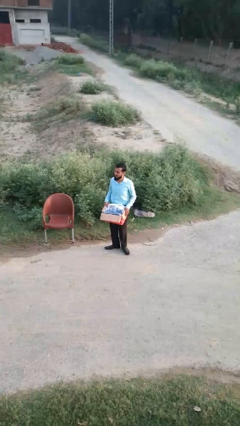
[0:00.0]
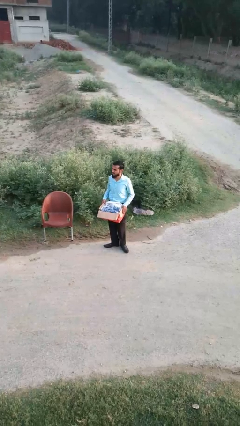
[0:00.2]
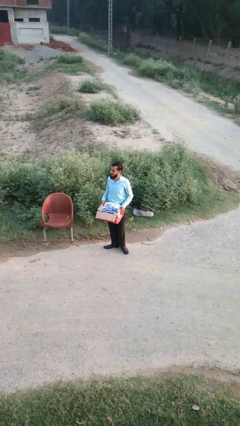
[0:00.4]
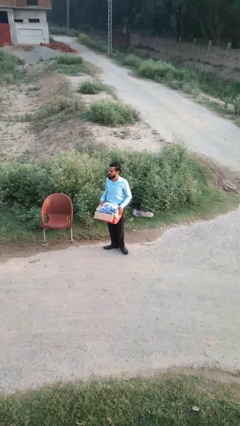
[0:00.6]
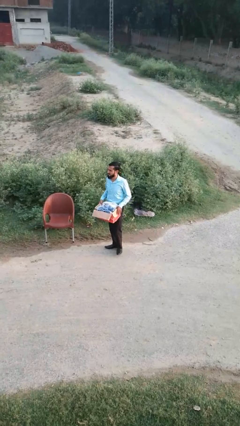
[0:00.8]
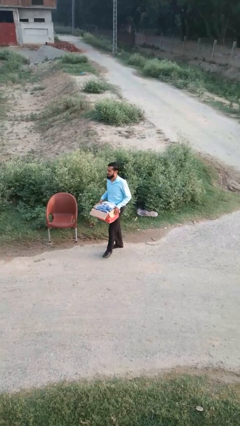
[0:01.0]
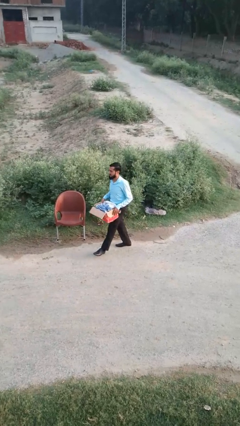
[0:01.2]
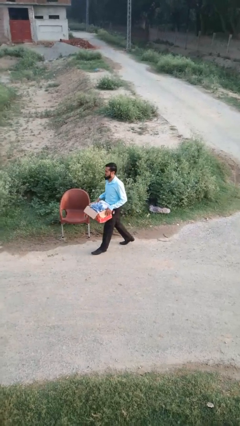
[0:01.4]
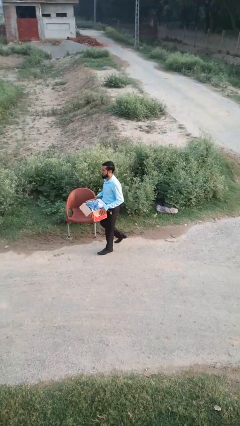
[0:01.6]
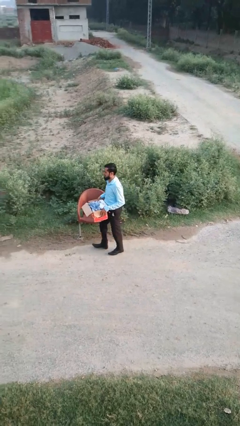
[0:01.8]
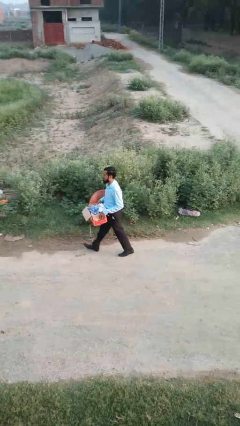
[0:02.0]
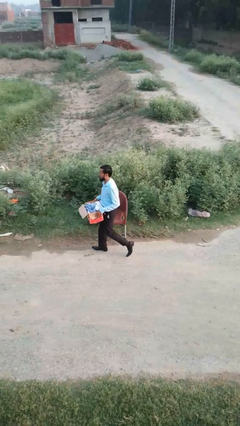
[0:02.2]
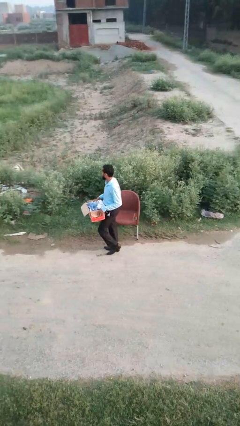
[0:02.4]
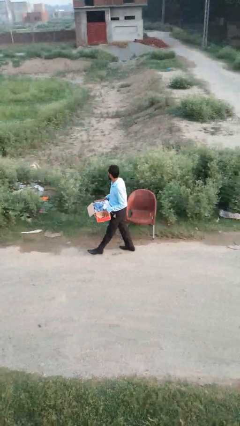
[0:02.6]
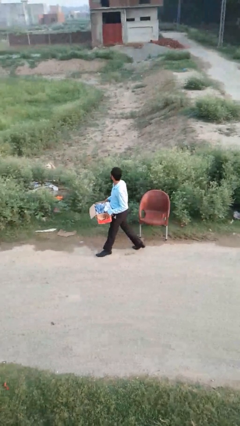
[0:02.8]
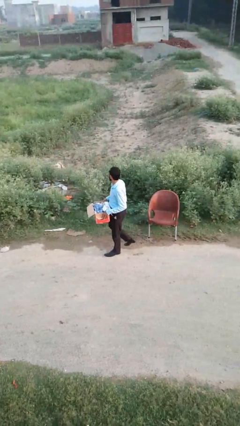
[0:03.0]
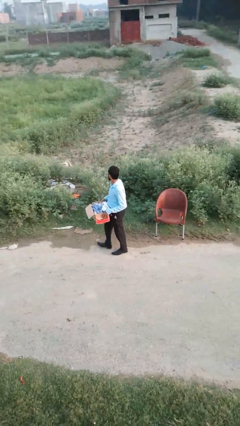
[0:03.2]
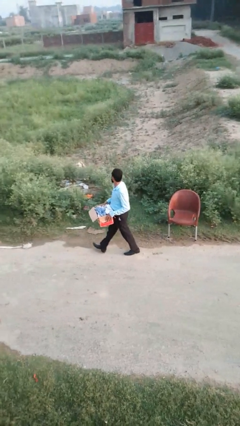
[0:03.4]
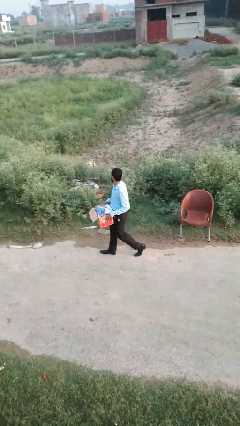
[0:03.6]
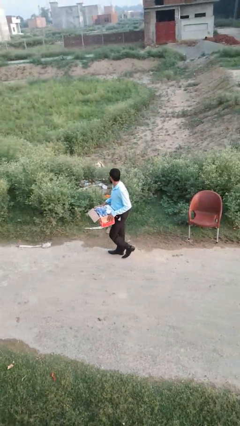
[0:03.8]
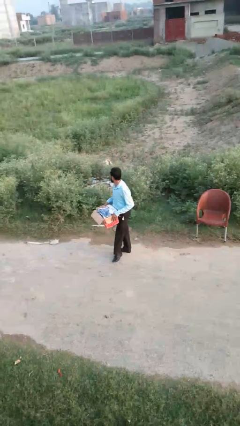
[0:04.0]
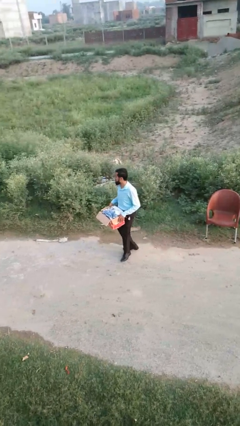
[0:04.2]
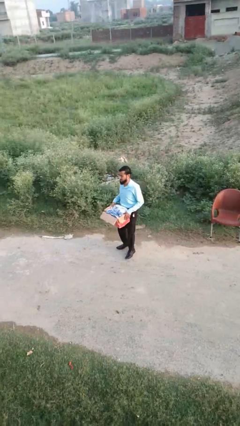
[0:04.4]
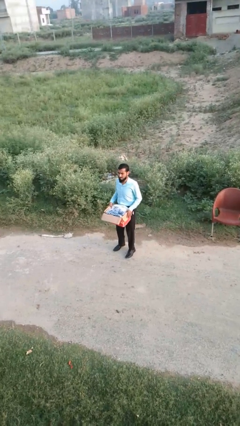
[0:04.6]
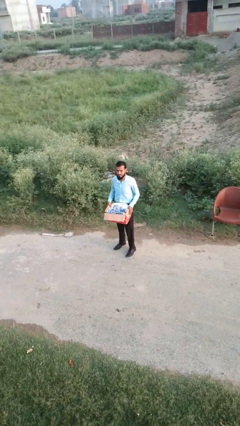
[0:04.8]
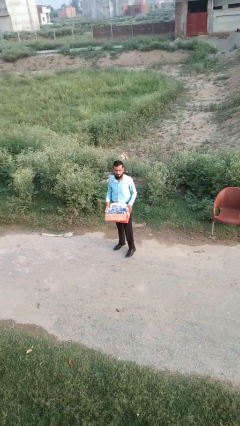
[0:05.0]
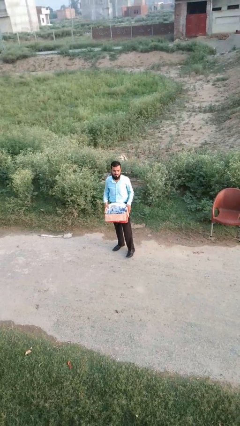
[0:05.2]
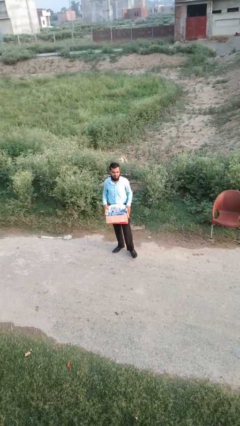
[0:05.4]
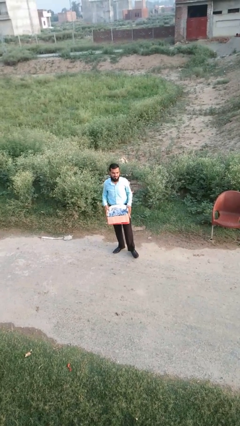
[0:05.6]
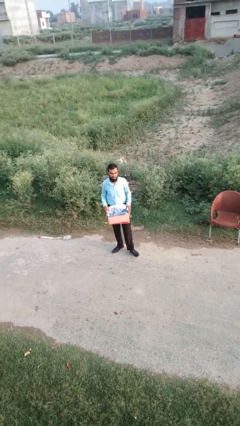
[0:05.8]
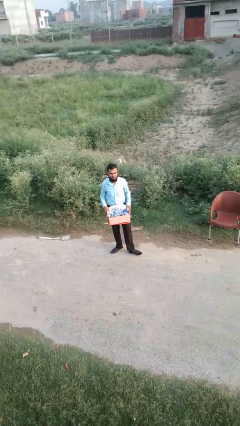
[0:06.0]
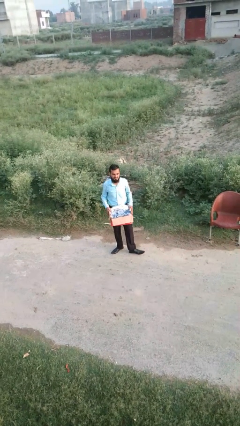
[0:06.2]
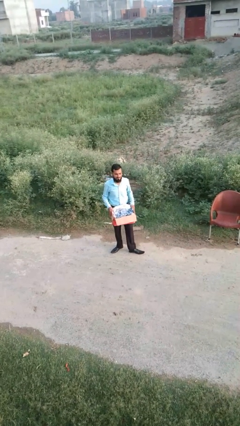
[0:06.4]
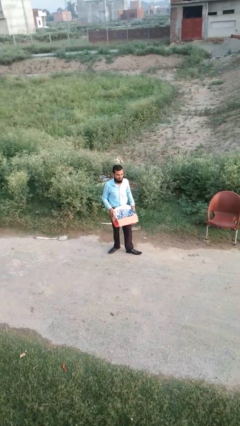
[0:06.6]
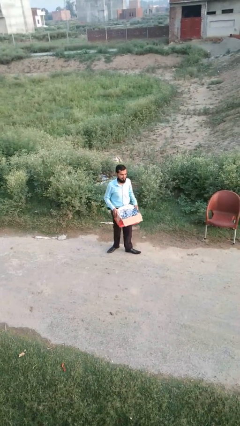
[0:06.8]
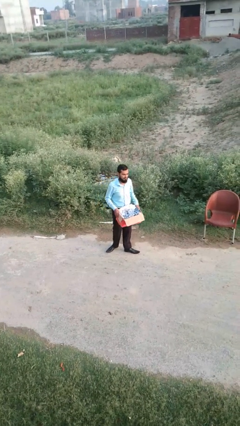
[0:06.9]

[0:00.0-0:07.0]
person carries laundry basket

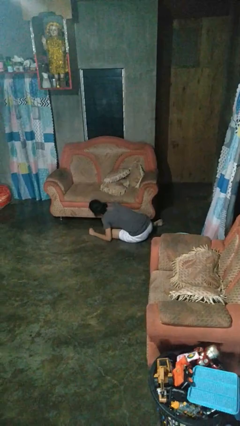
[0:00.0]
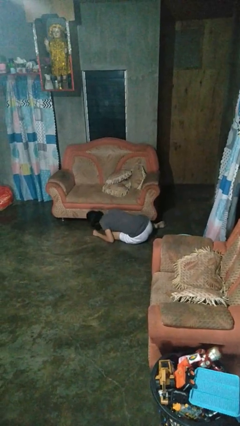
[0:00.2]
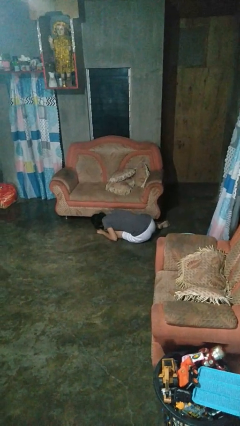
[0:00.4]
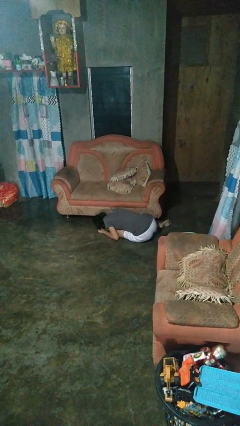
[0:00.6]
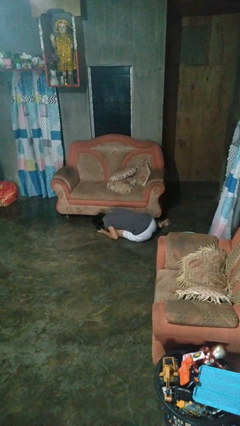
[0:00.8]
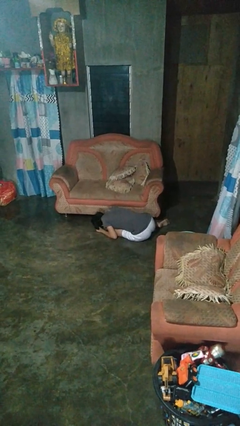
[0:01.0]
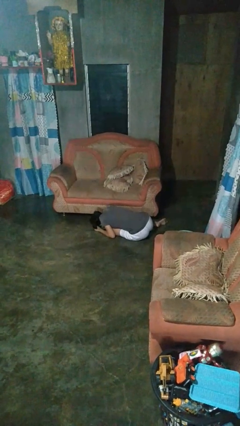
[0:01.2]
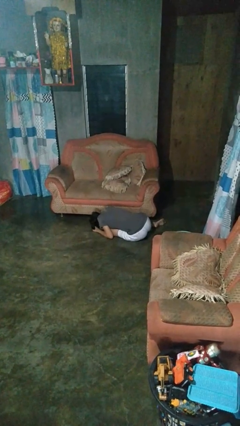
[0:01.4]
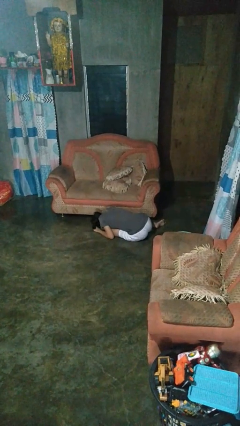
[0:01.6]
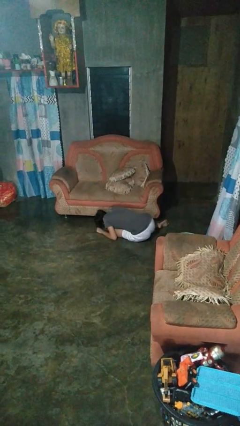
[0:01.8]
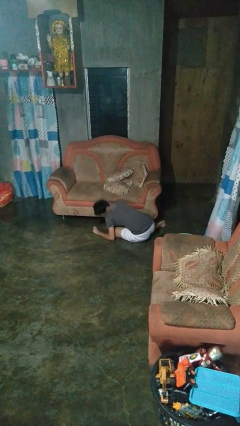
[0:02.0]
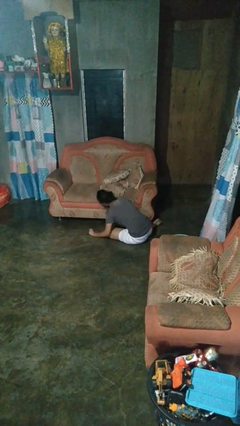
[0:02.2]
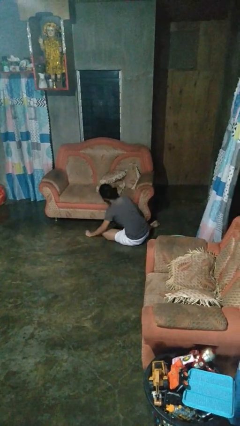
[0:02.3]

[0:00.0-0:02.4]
person searches under couch

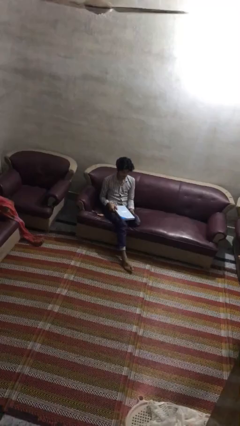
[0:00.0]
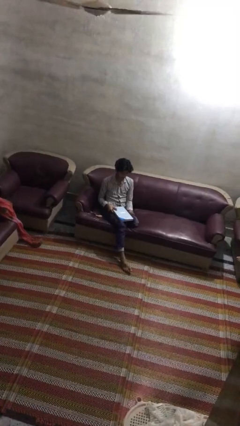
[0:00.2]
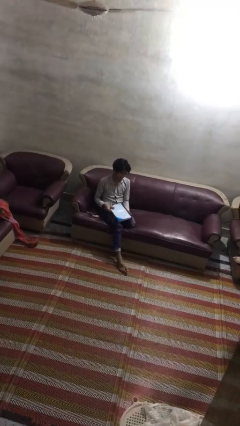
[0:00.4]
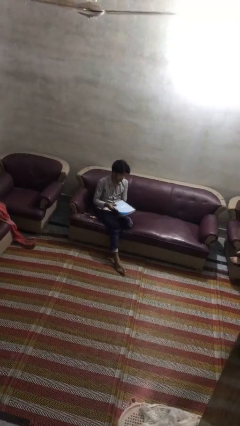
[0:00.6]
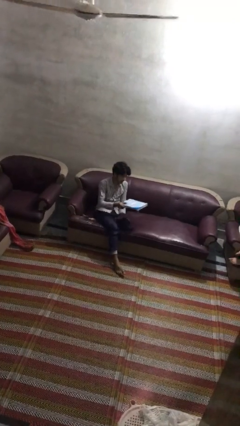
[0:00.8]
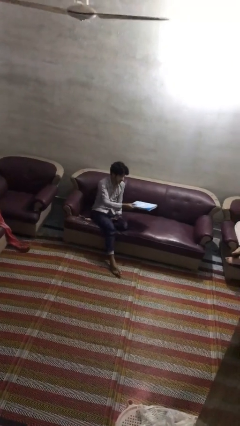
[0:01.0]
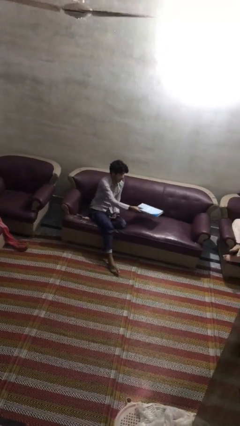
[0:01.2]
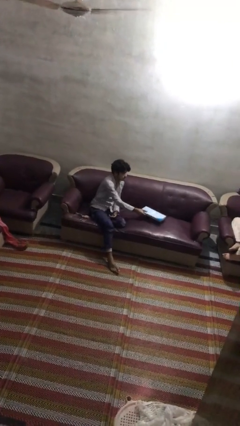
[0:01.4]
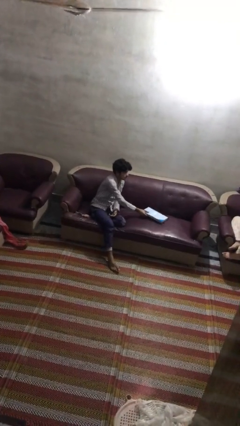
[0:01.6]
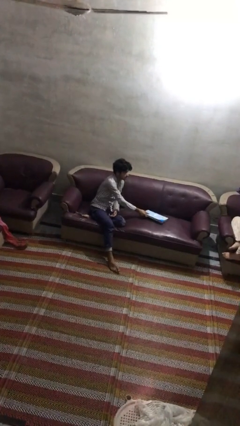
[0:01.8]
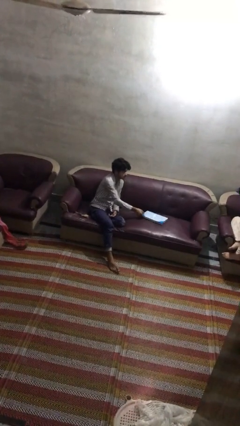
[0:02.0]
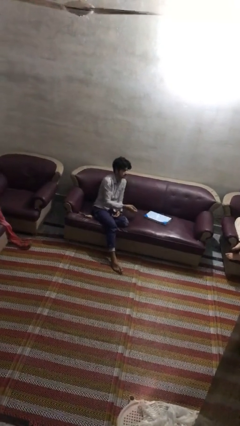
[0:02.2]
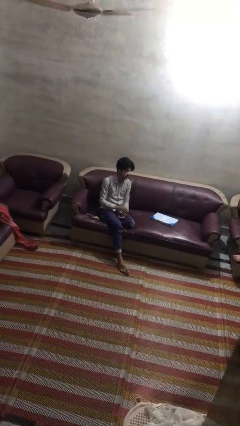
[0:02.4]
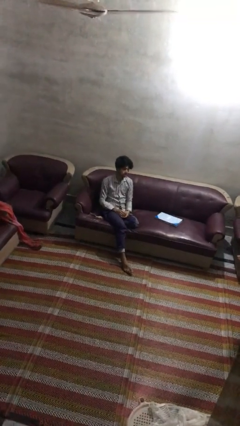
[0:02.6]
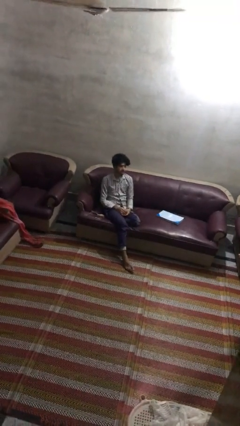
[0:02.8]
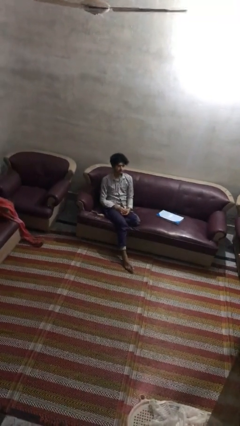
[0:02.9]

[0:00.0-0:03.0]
person puts down object on couch

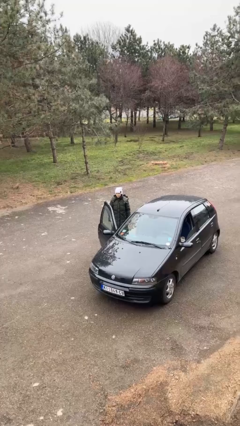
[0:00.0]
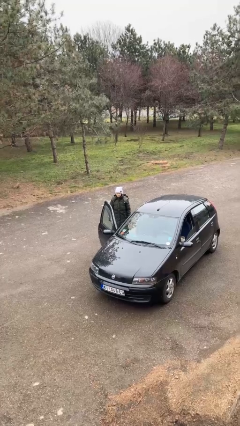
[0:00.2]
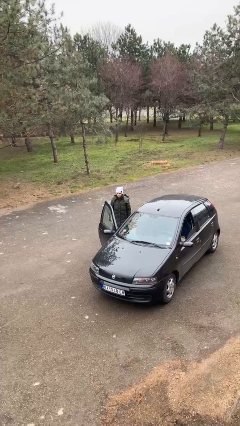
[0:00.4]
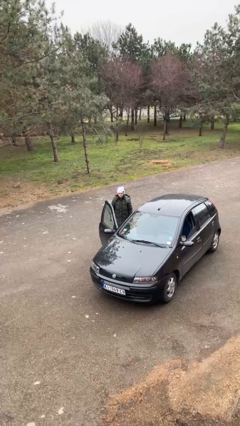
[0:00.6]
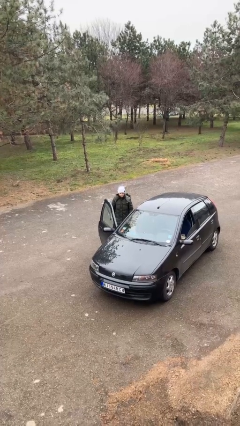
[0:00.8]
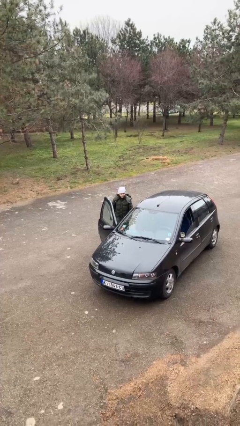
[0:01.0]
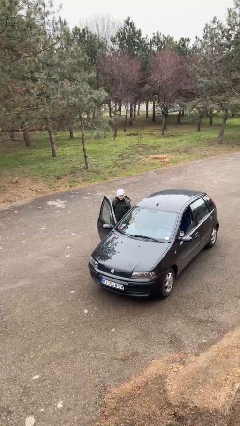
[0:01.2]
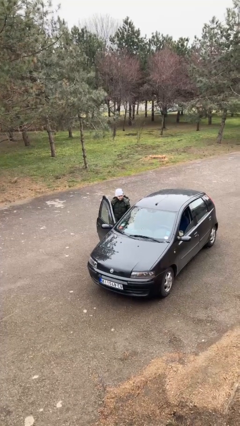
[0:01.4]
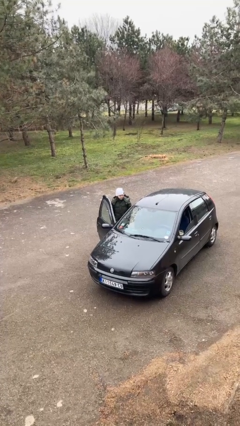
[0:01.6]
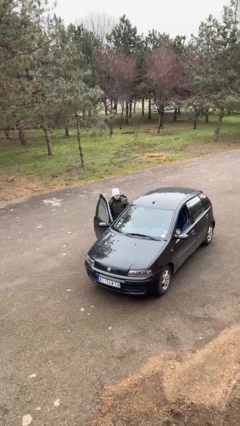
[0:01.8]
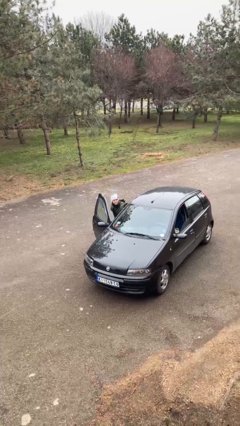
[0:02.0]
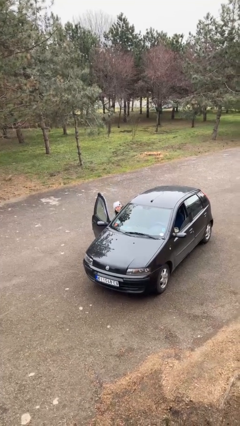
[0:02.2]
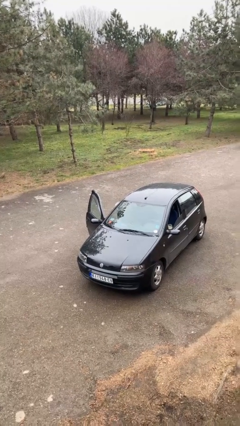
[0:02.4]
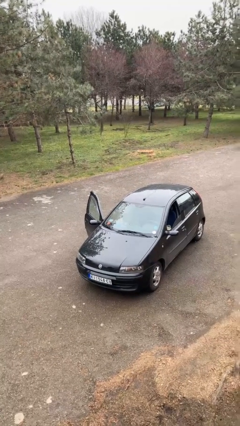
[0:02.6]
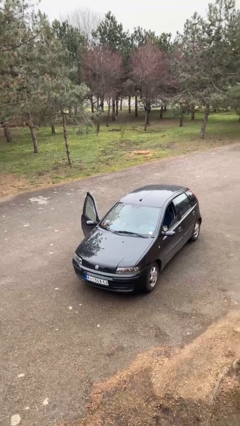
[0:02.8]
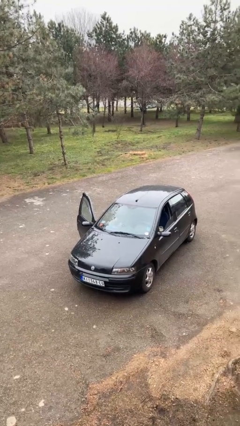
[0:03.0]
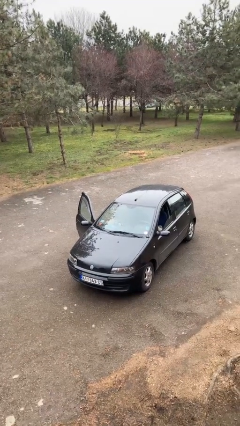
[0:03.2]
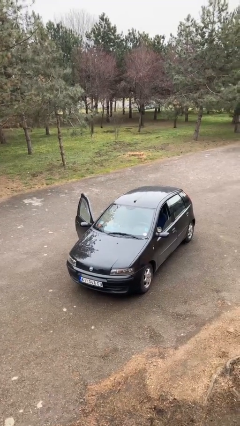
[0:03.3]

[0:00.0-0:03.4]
person enters car

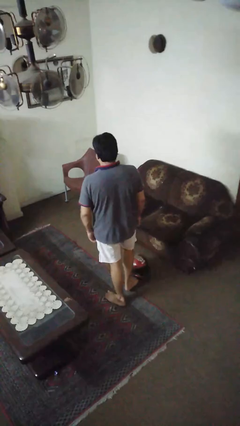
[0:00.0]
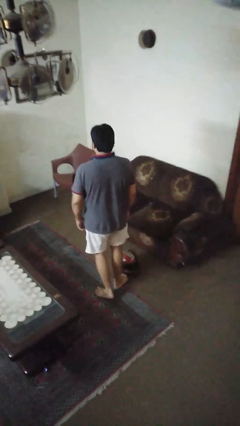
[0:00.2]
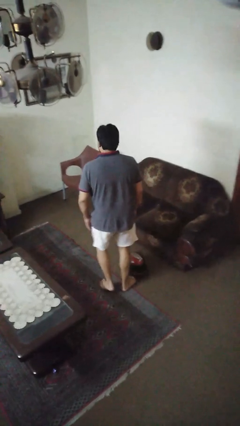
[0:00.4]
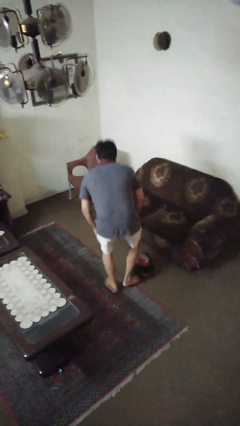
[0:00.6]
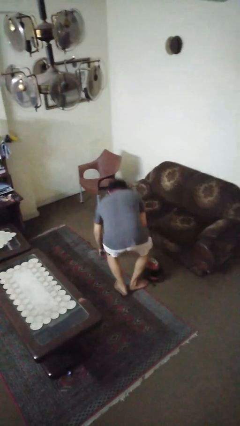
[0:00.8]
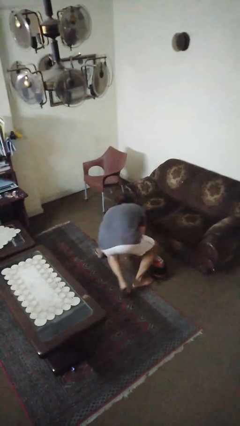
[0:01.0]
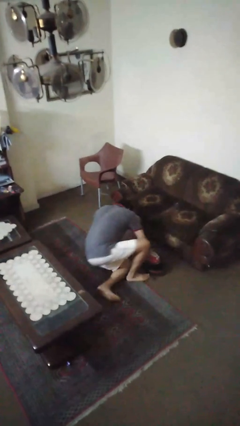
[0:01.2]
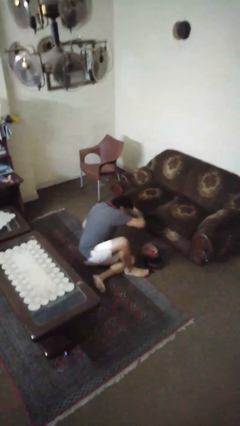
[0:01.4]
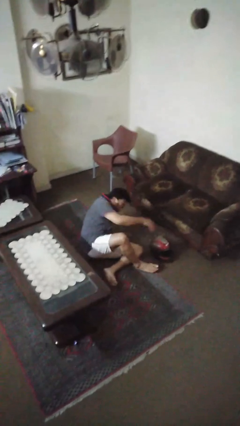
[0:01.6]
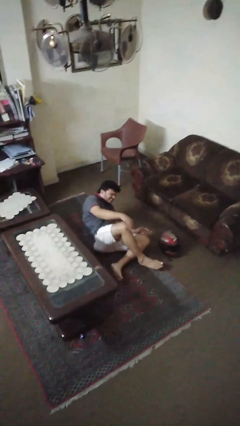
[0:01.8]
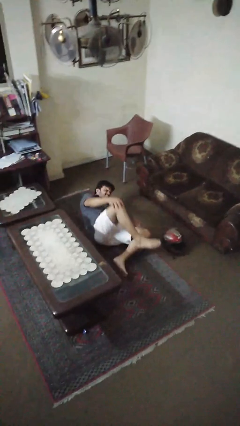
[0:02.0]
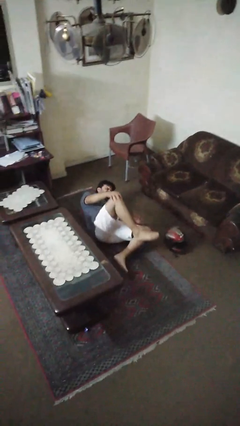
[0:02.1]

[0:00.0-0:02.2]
person lies down on floor
